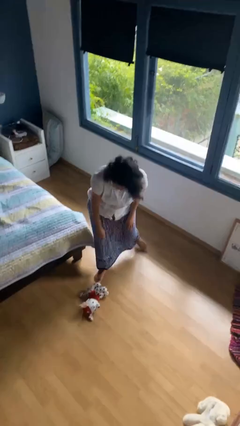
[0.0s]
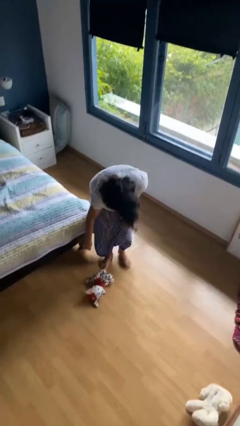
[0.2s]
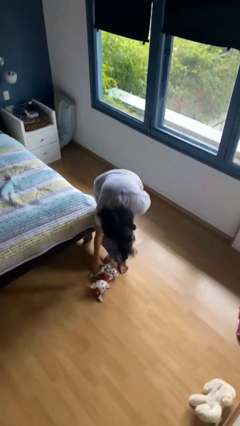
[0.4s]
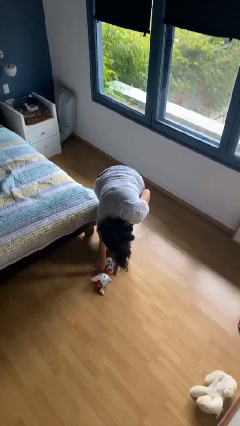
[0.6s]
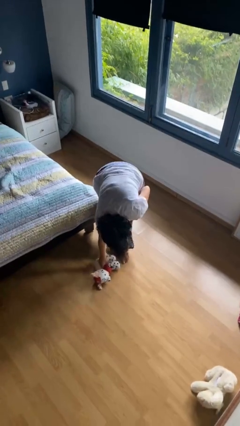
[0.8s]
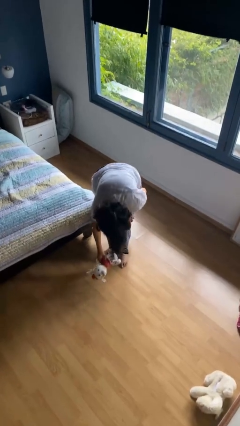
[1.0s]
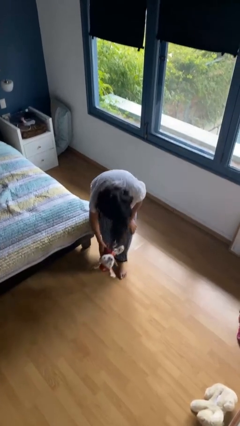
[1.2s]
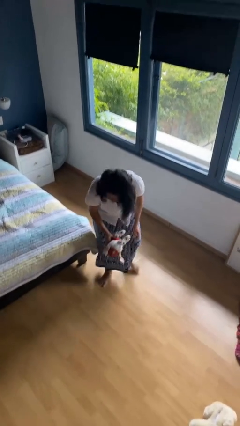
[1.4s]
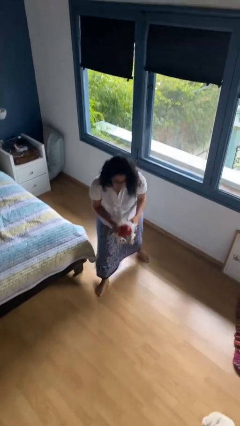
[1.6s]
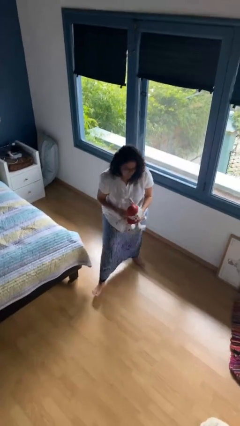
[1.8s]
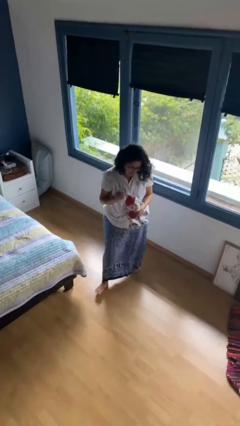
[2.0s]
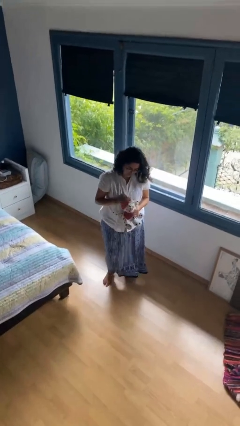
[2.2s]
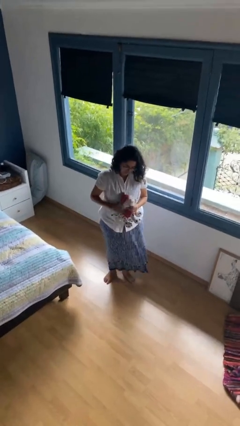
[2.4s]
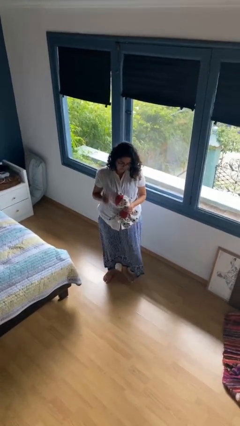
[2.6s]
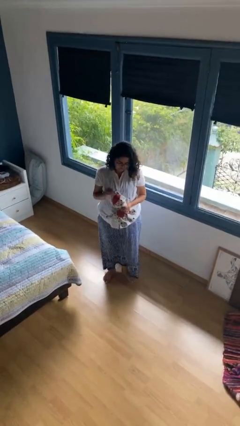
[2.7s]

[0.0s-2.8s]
person picks up object from floor

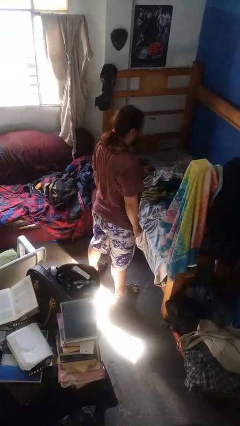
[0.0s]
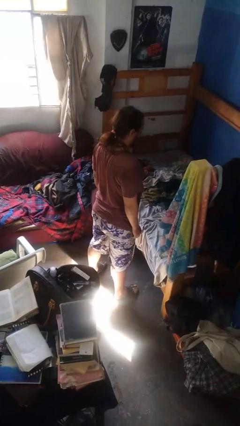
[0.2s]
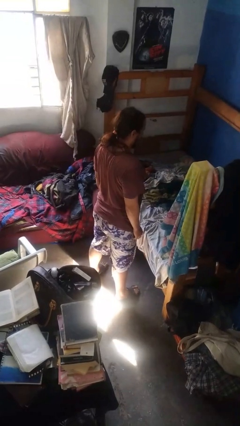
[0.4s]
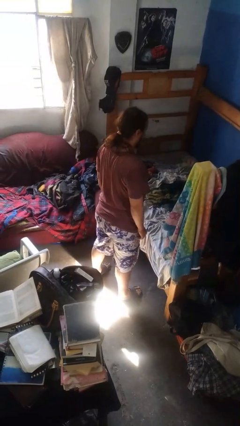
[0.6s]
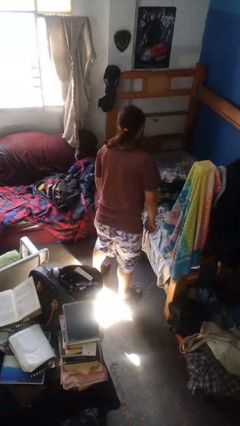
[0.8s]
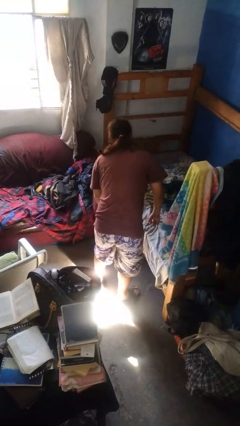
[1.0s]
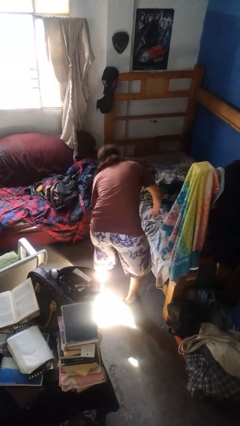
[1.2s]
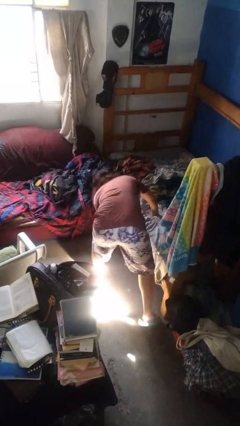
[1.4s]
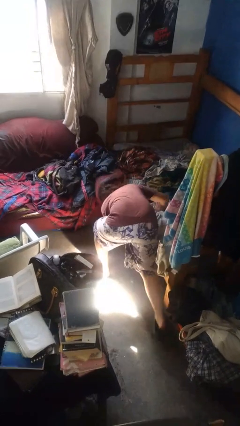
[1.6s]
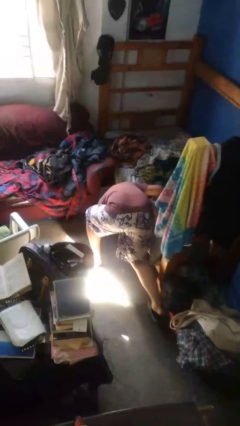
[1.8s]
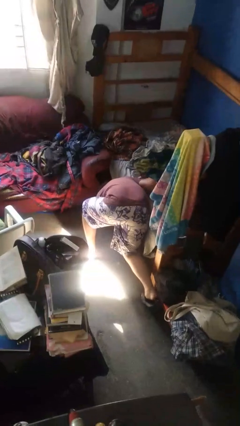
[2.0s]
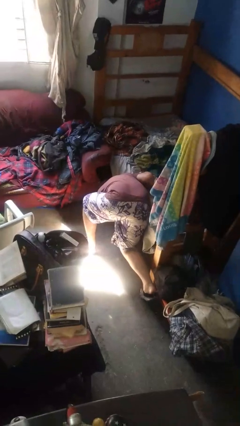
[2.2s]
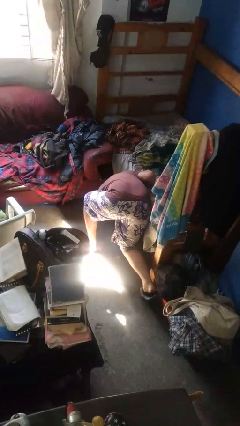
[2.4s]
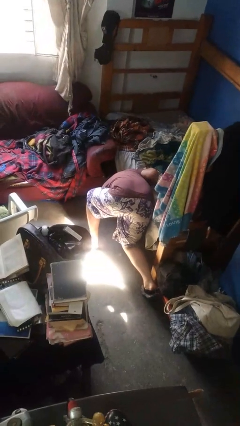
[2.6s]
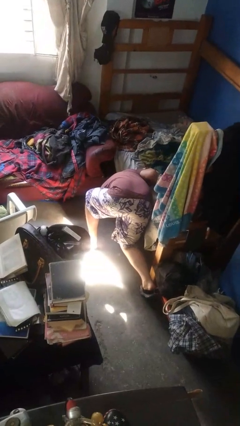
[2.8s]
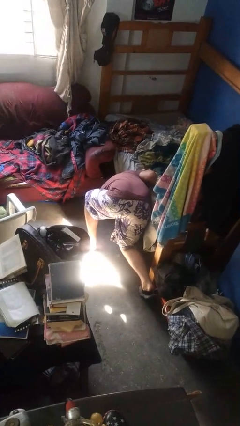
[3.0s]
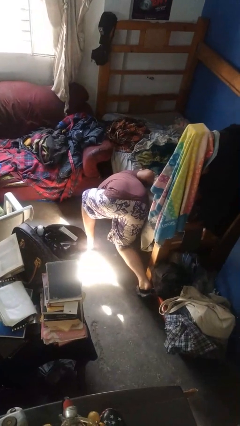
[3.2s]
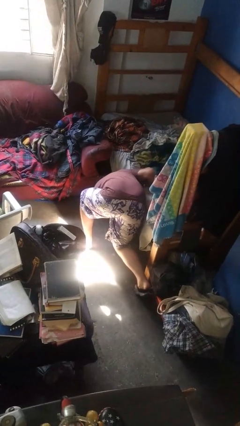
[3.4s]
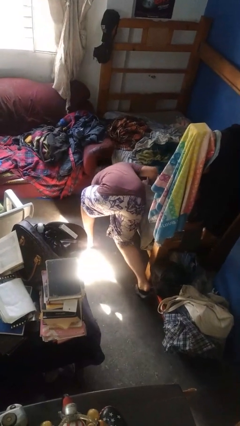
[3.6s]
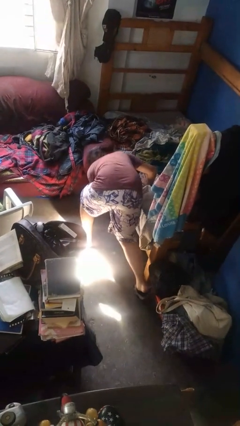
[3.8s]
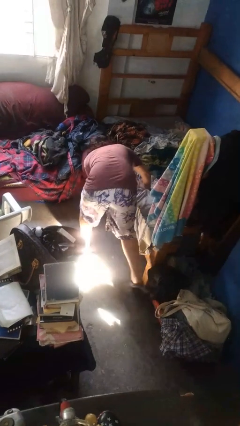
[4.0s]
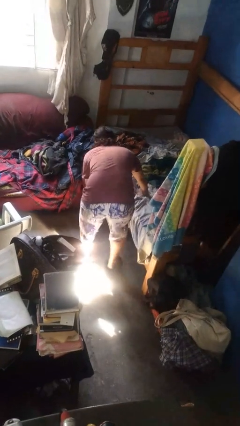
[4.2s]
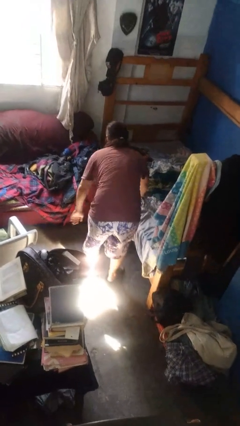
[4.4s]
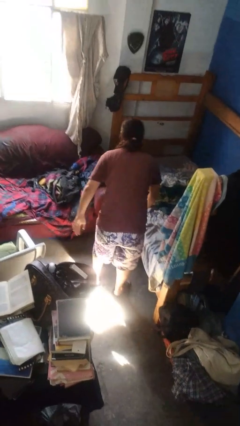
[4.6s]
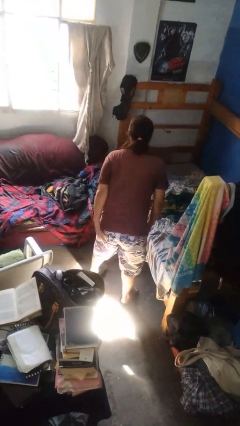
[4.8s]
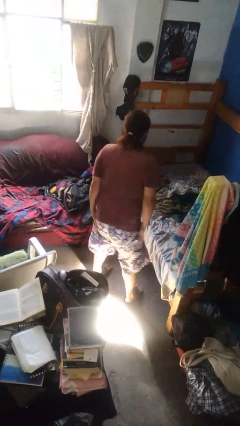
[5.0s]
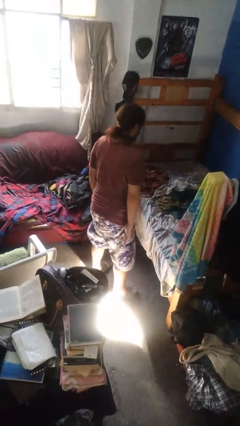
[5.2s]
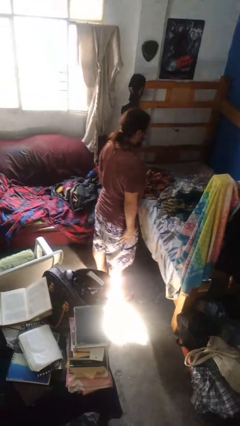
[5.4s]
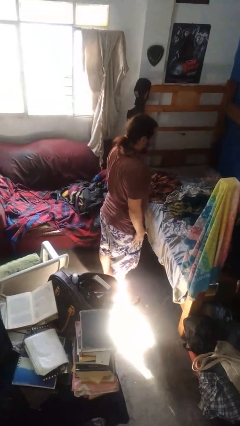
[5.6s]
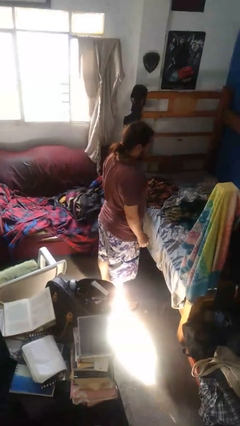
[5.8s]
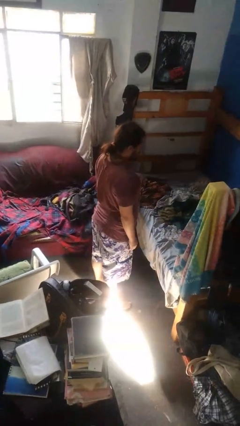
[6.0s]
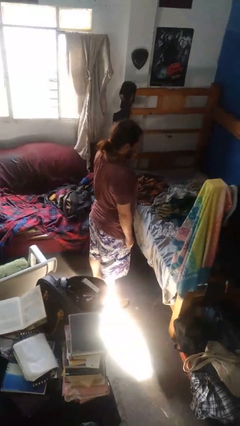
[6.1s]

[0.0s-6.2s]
person searches under bed

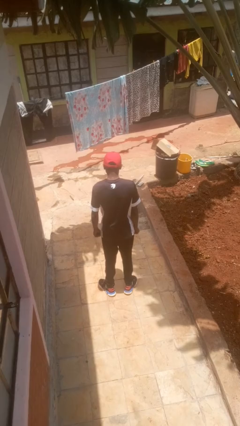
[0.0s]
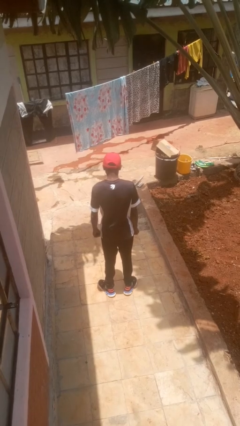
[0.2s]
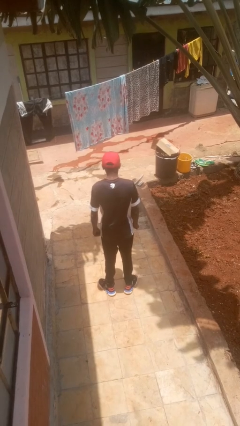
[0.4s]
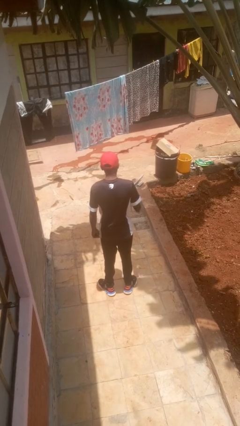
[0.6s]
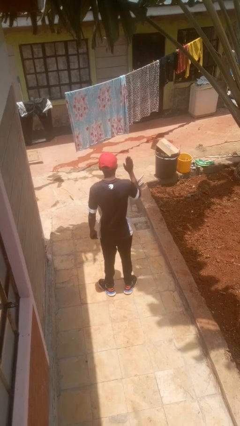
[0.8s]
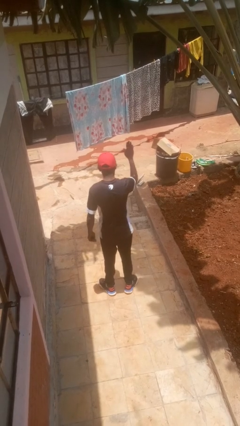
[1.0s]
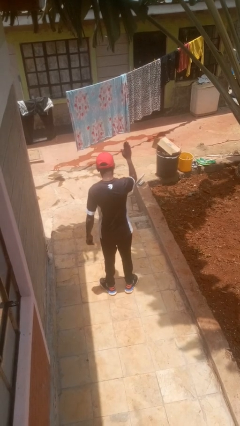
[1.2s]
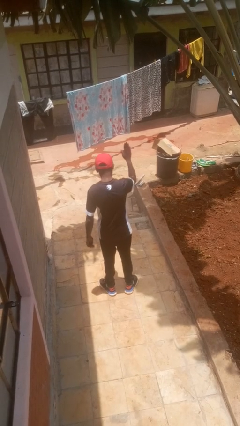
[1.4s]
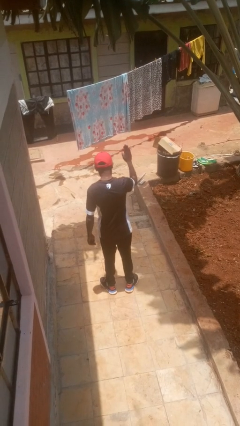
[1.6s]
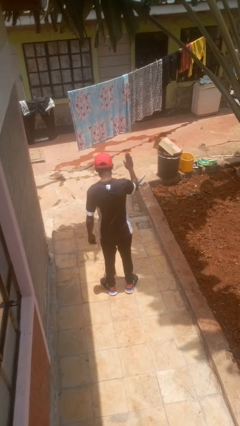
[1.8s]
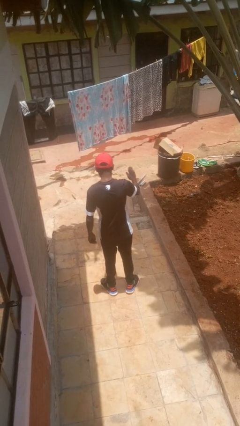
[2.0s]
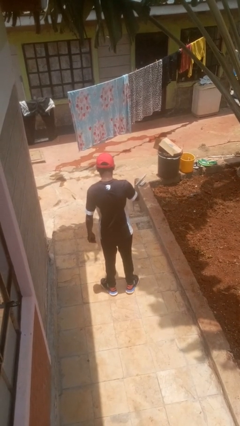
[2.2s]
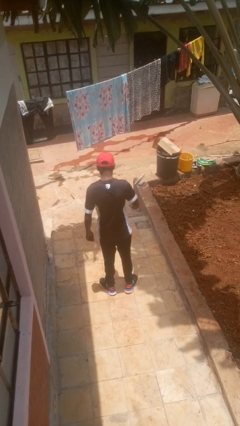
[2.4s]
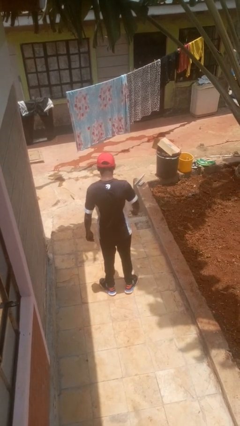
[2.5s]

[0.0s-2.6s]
person gestures stop

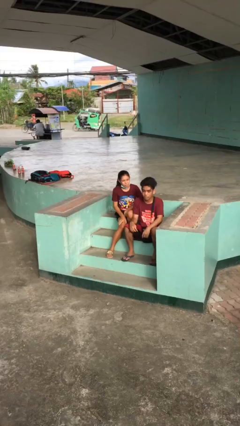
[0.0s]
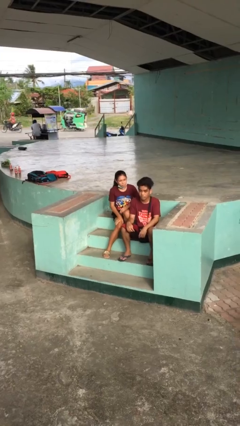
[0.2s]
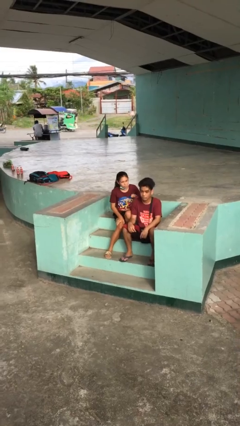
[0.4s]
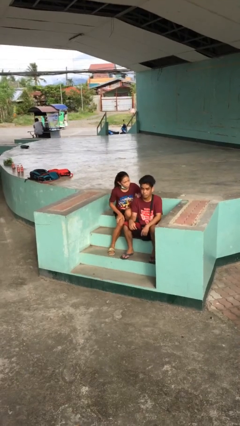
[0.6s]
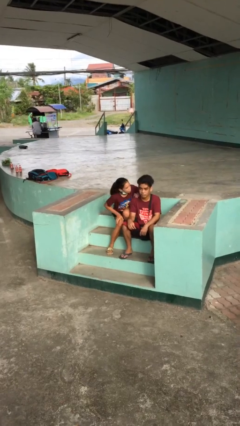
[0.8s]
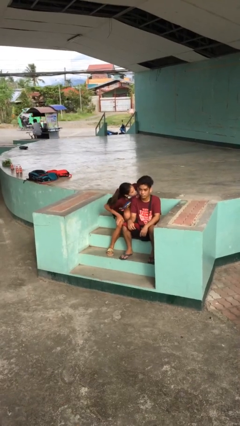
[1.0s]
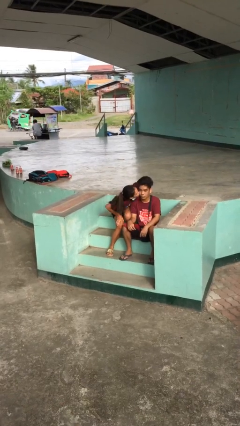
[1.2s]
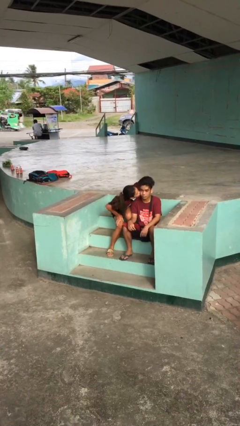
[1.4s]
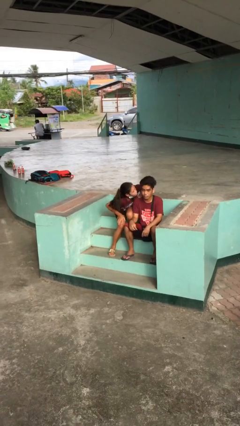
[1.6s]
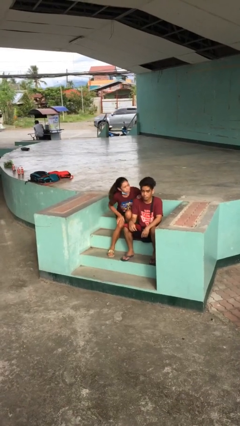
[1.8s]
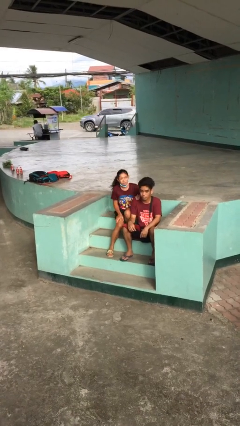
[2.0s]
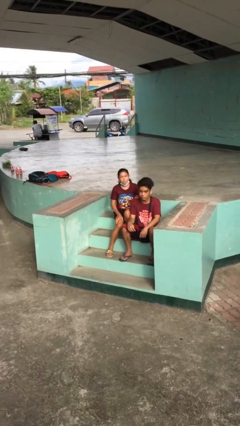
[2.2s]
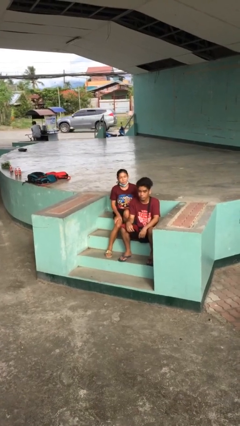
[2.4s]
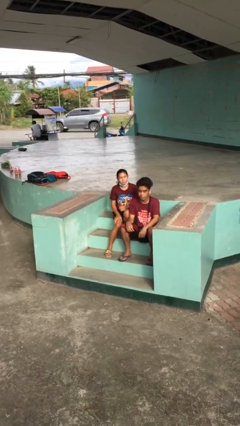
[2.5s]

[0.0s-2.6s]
person kisses cheek of person

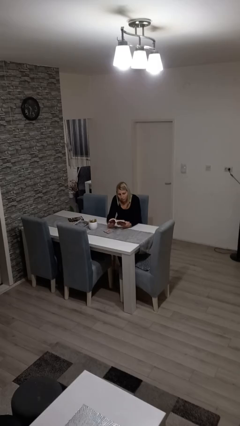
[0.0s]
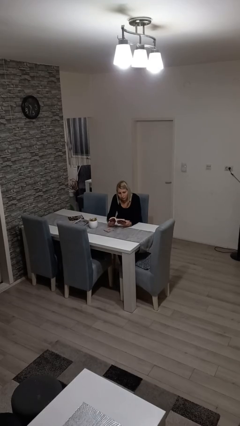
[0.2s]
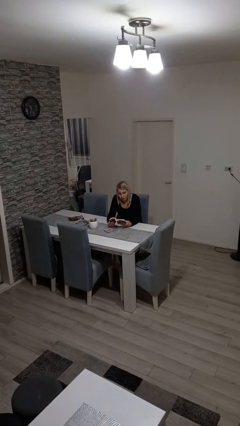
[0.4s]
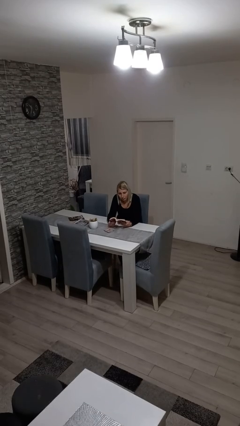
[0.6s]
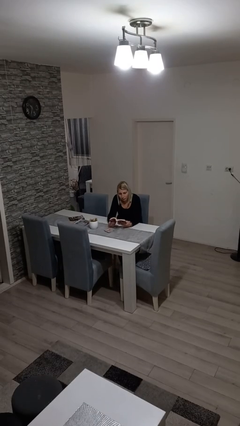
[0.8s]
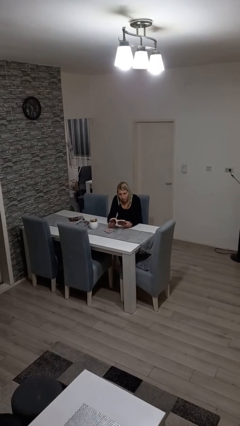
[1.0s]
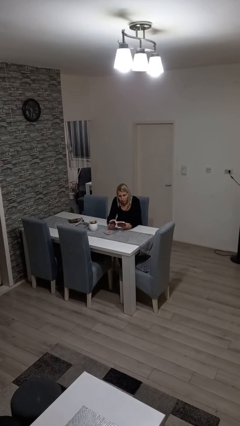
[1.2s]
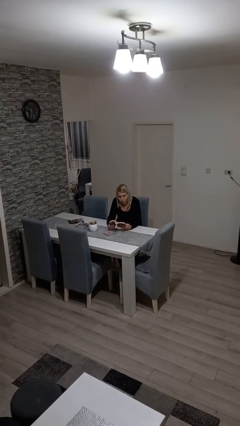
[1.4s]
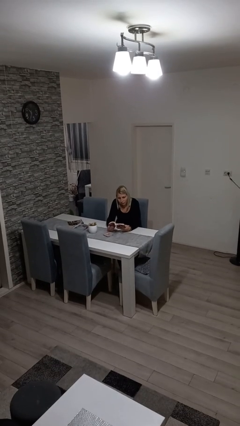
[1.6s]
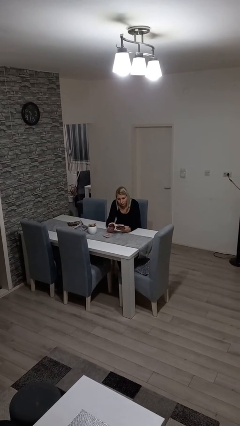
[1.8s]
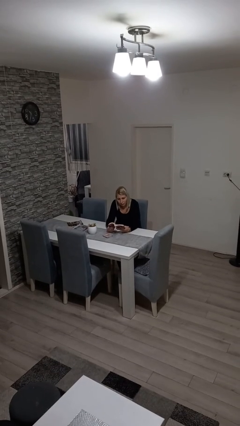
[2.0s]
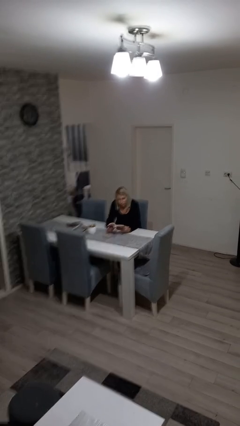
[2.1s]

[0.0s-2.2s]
person reads book

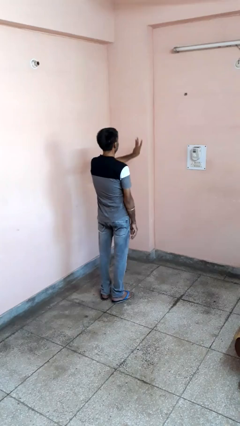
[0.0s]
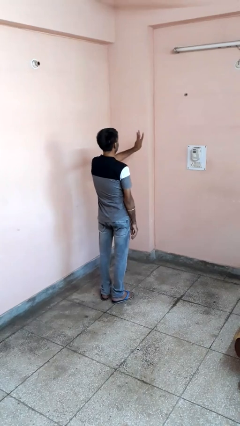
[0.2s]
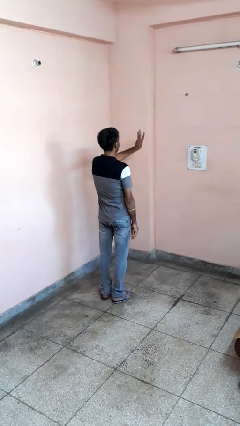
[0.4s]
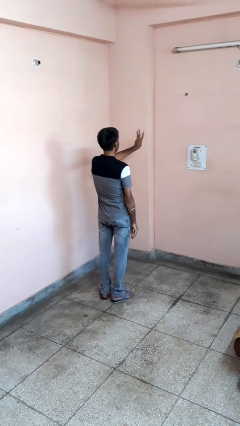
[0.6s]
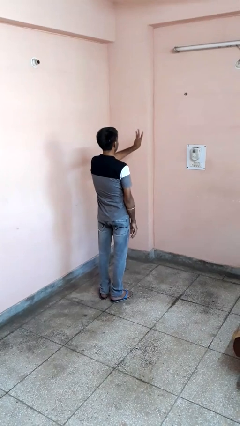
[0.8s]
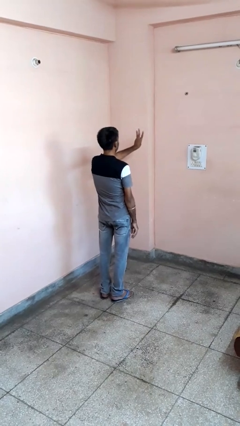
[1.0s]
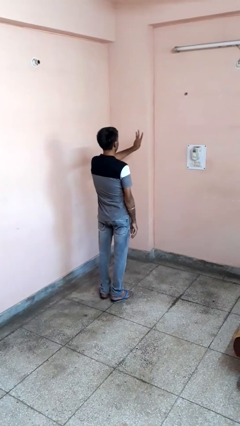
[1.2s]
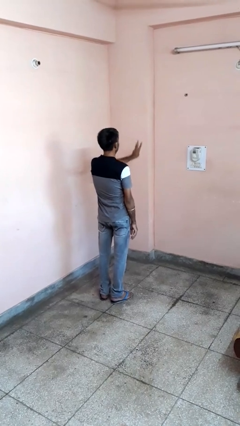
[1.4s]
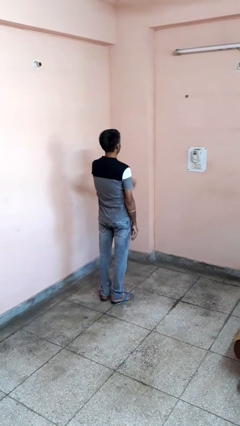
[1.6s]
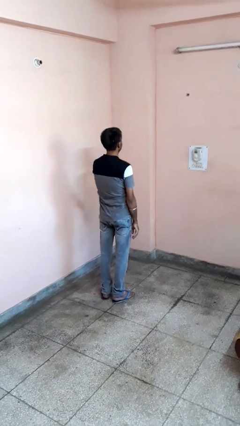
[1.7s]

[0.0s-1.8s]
person gestures number three
